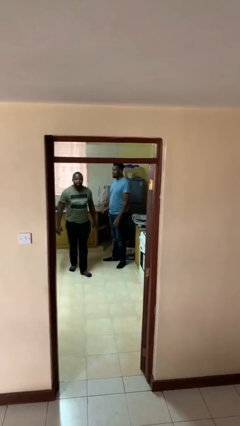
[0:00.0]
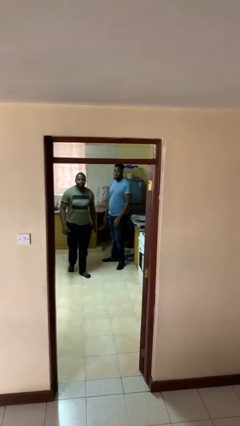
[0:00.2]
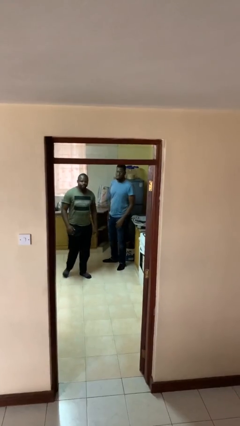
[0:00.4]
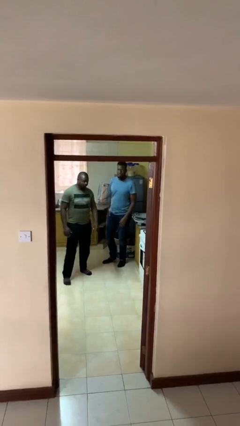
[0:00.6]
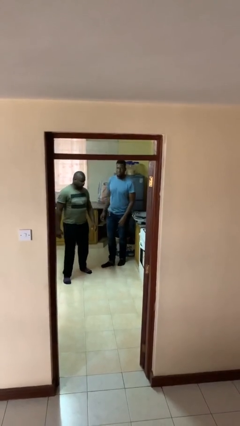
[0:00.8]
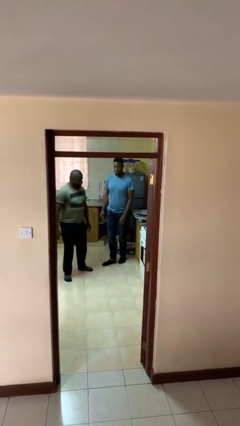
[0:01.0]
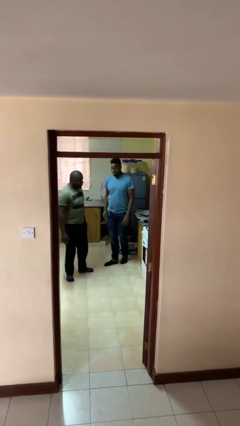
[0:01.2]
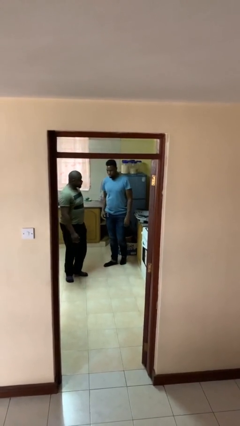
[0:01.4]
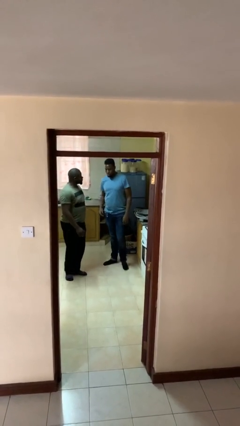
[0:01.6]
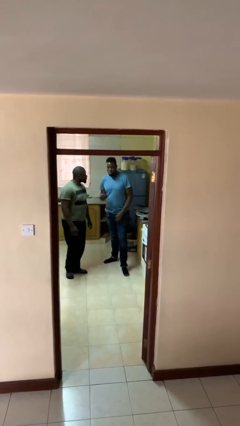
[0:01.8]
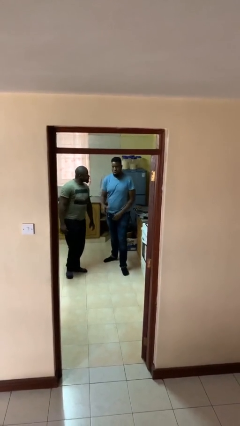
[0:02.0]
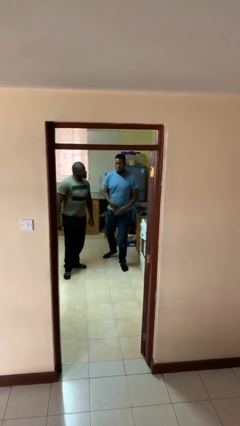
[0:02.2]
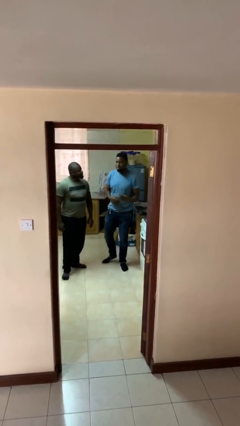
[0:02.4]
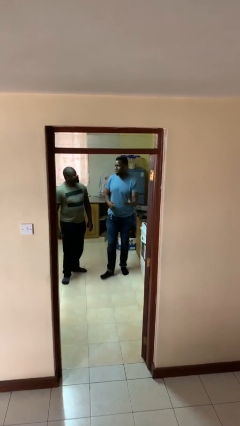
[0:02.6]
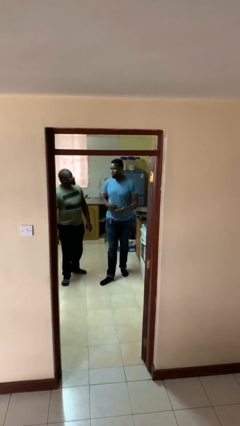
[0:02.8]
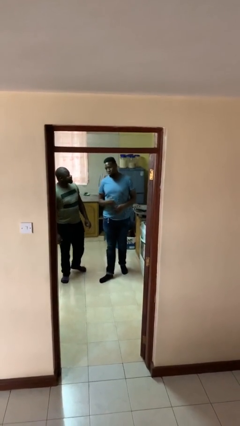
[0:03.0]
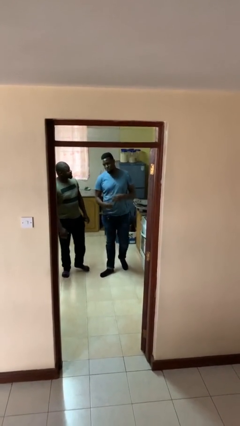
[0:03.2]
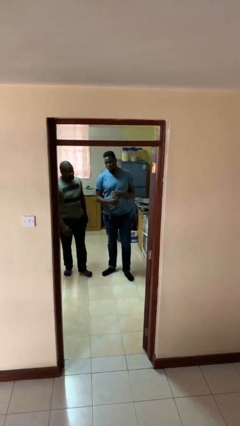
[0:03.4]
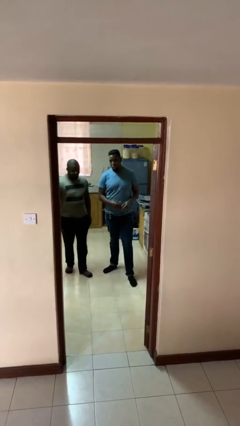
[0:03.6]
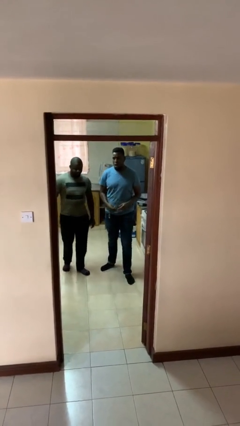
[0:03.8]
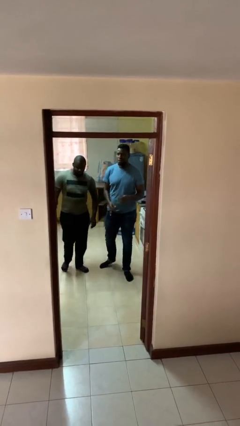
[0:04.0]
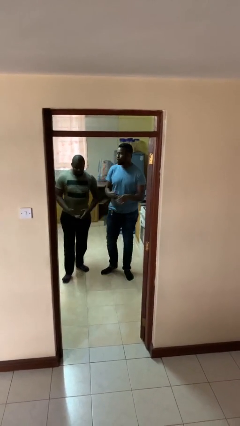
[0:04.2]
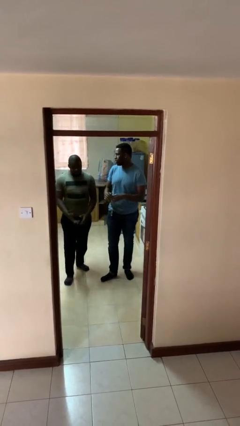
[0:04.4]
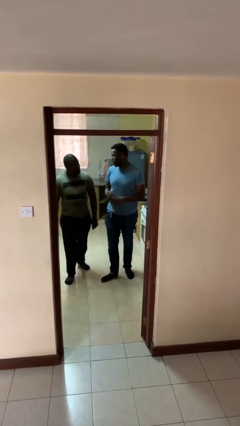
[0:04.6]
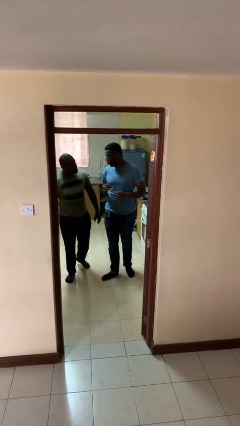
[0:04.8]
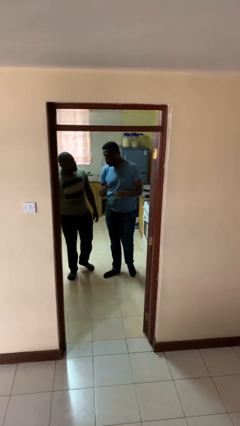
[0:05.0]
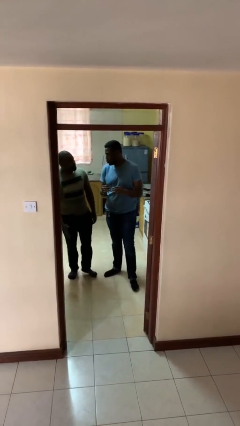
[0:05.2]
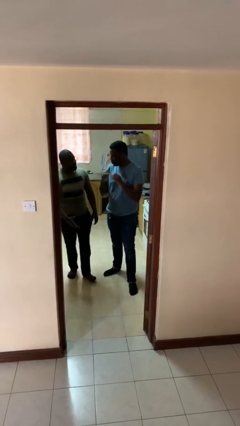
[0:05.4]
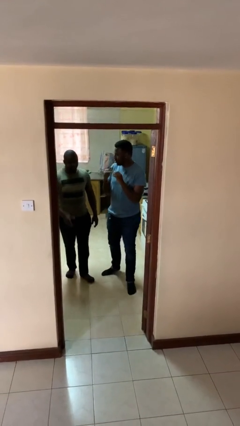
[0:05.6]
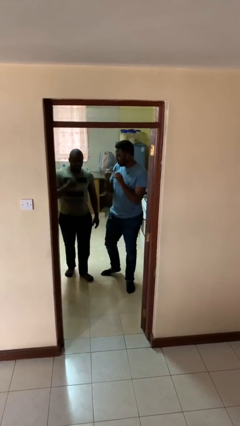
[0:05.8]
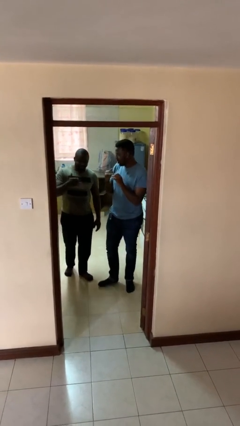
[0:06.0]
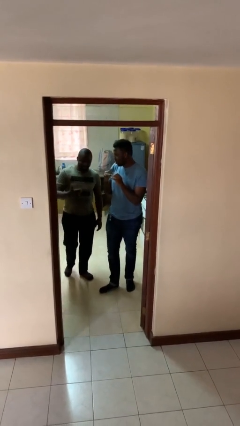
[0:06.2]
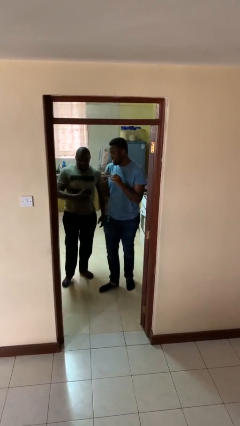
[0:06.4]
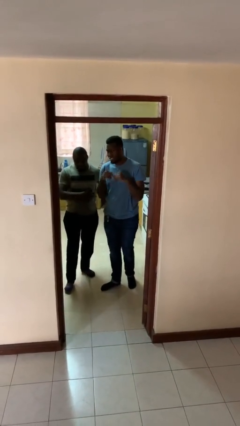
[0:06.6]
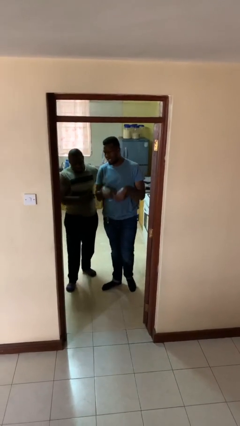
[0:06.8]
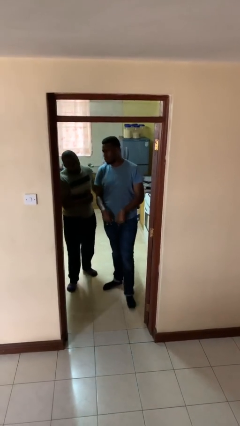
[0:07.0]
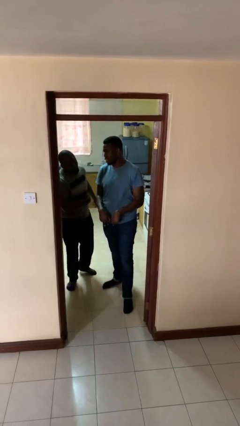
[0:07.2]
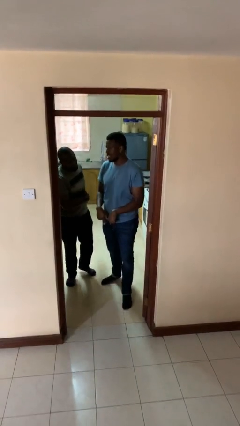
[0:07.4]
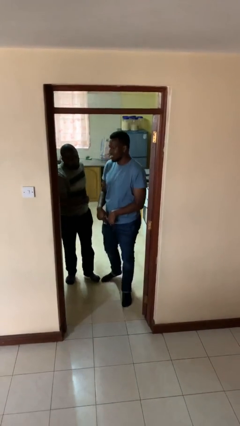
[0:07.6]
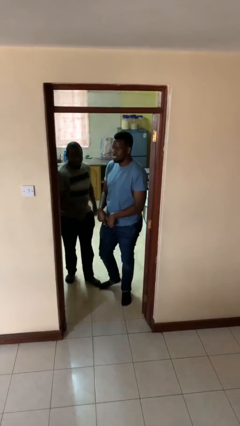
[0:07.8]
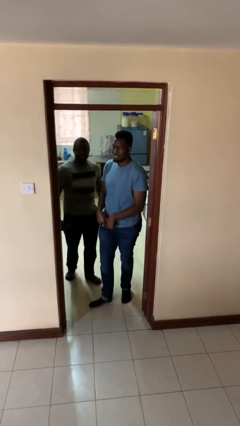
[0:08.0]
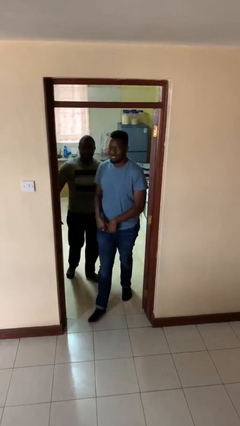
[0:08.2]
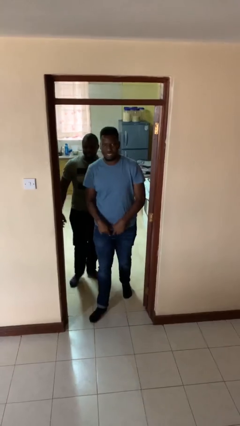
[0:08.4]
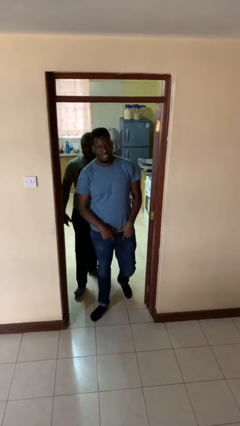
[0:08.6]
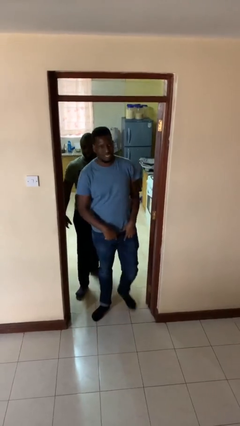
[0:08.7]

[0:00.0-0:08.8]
person talks to person

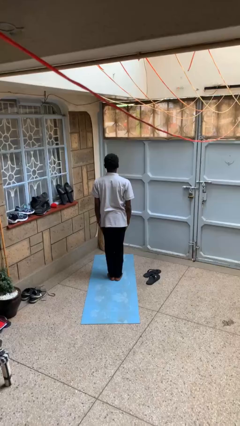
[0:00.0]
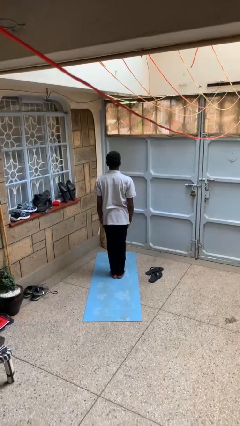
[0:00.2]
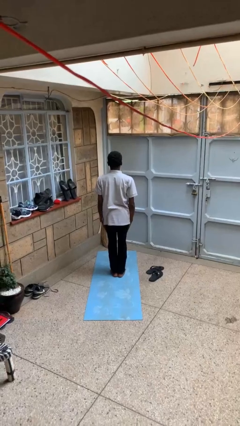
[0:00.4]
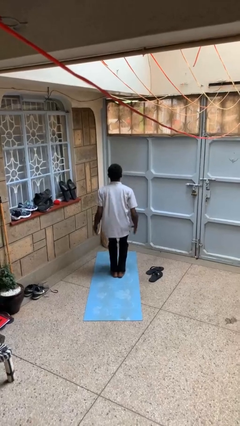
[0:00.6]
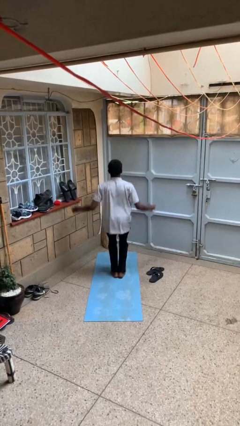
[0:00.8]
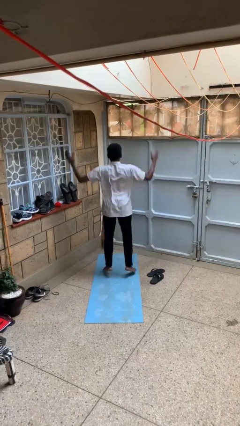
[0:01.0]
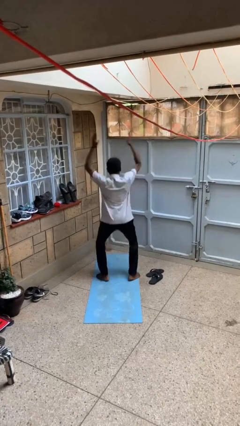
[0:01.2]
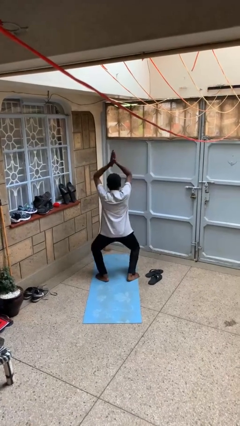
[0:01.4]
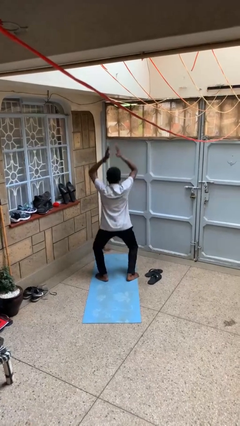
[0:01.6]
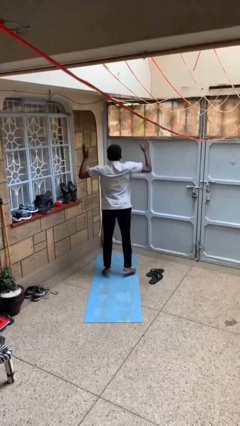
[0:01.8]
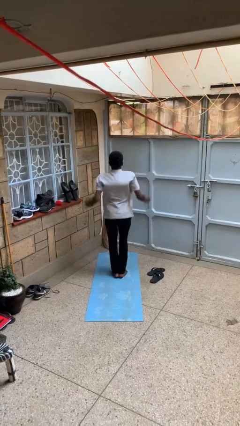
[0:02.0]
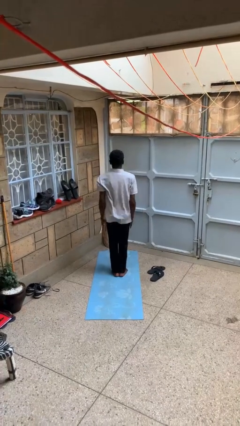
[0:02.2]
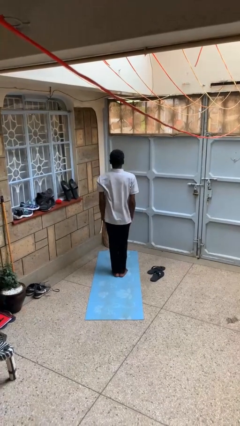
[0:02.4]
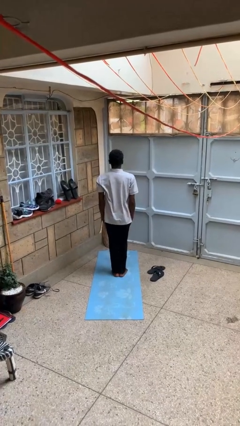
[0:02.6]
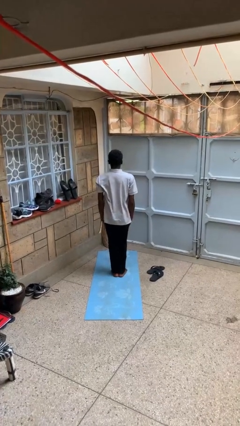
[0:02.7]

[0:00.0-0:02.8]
person exercises with jumping jacks

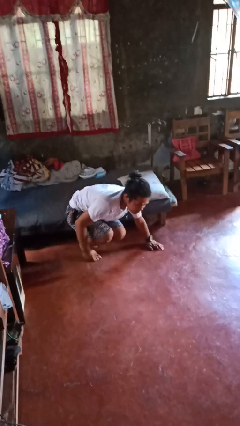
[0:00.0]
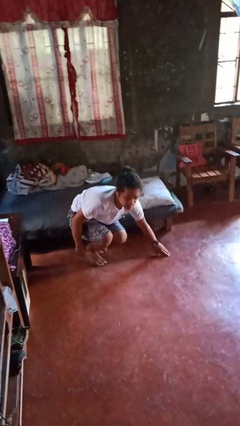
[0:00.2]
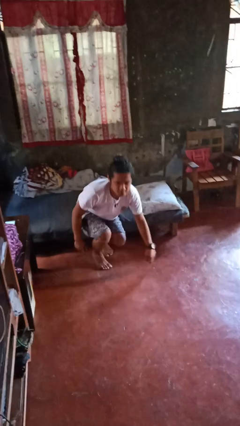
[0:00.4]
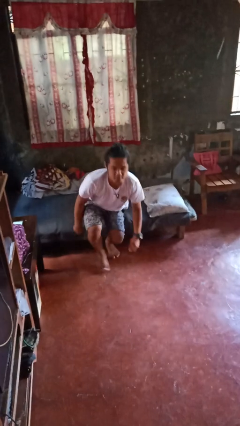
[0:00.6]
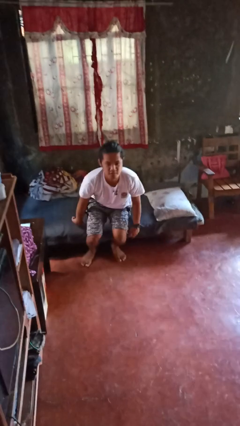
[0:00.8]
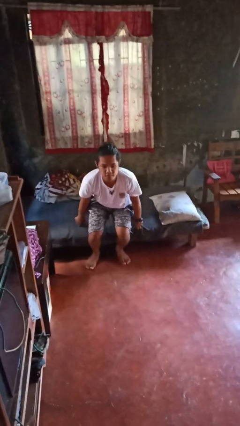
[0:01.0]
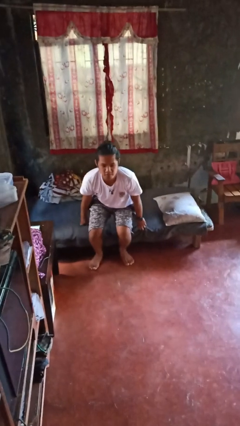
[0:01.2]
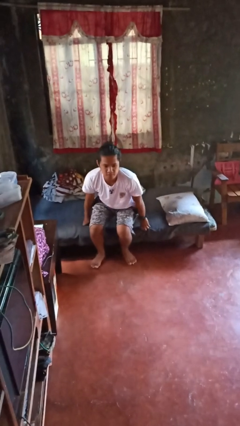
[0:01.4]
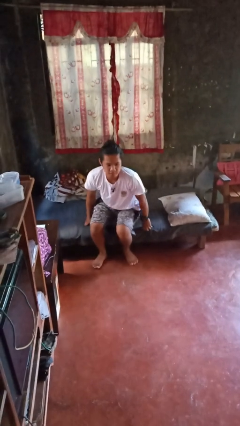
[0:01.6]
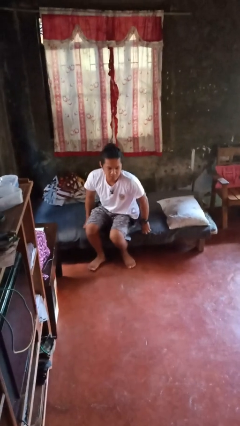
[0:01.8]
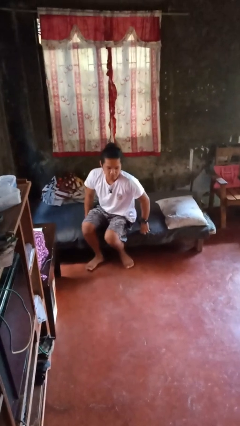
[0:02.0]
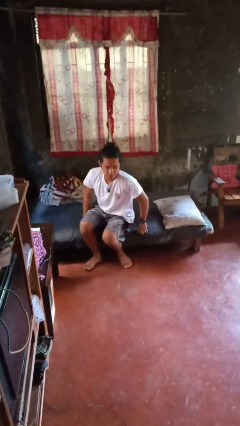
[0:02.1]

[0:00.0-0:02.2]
person stands up from floor

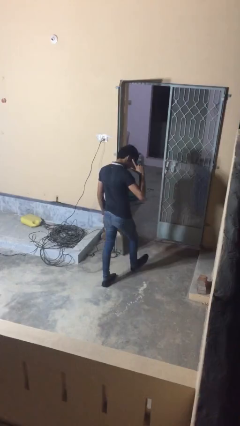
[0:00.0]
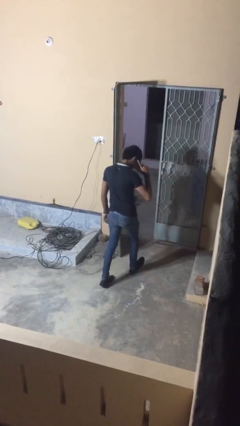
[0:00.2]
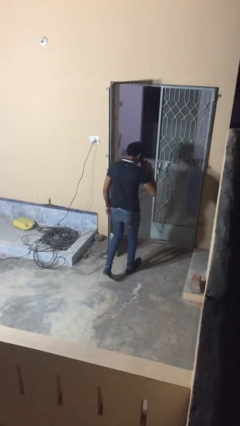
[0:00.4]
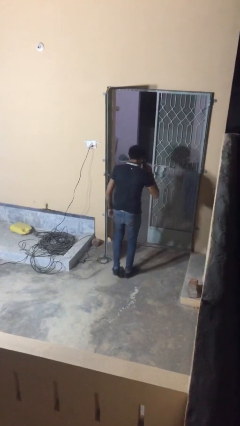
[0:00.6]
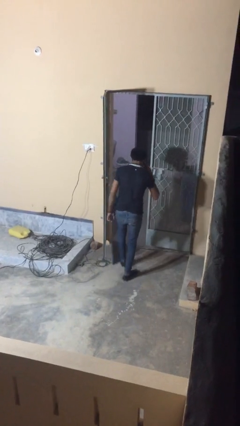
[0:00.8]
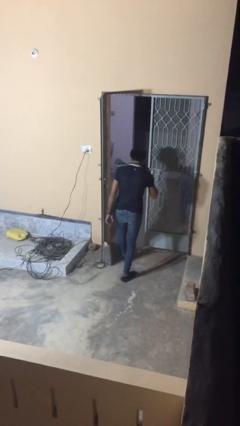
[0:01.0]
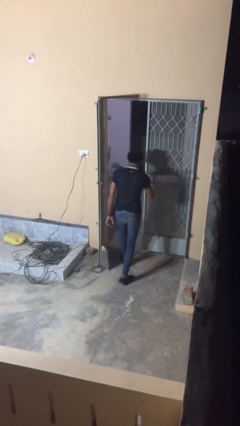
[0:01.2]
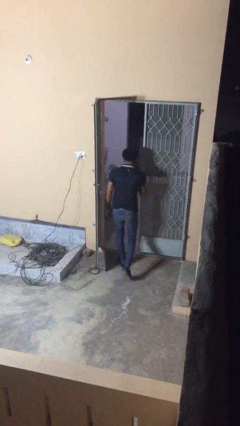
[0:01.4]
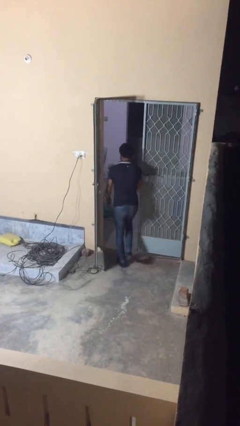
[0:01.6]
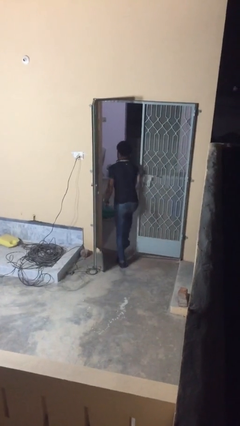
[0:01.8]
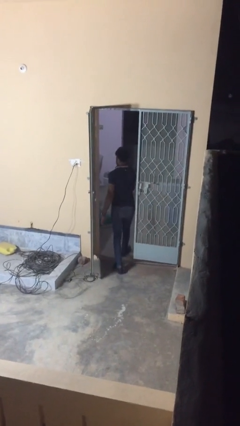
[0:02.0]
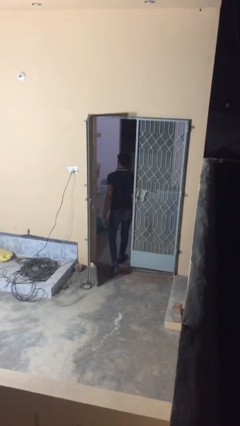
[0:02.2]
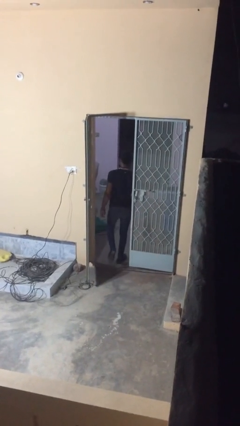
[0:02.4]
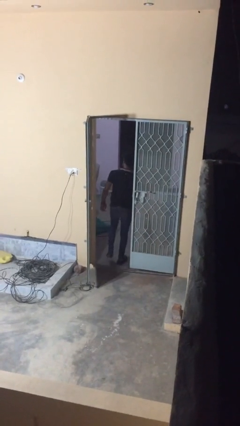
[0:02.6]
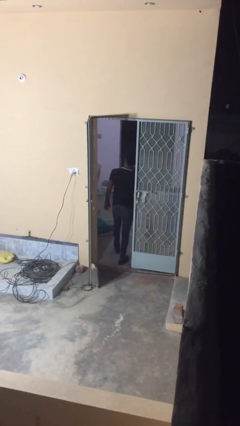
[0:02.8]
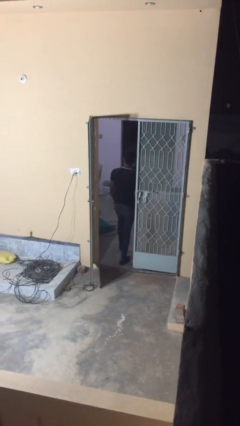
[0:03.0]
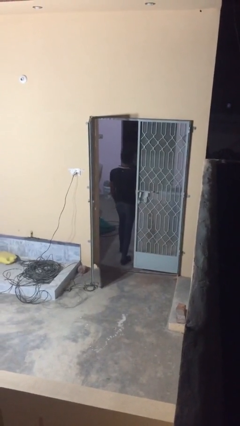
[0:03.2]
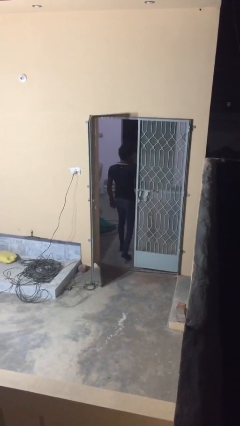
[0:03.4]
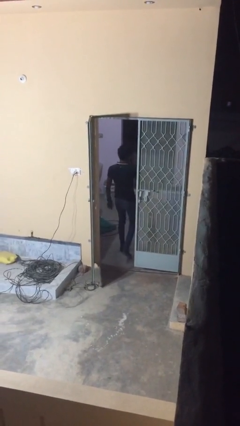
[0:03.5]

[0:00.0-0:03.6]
person exits scene through structure

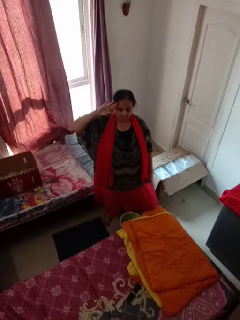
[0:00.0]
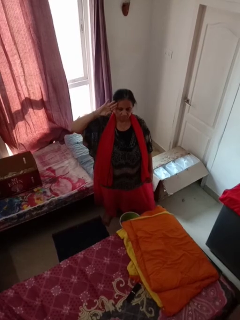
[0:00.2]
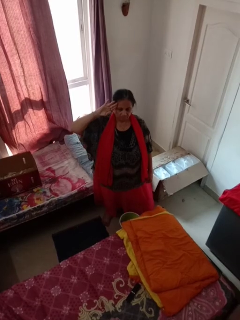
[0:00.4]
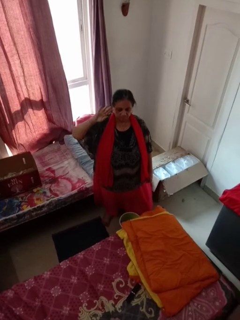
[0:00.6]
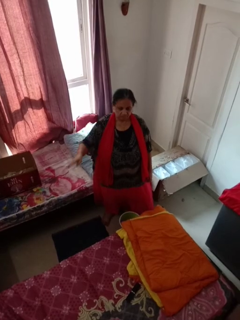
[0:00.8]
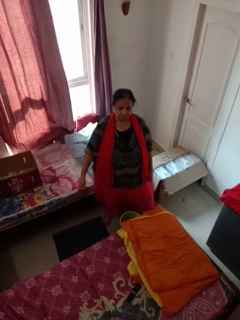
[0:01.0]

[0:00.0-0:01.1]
person salutes
